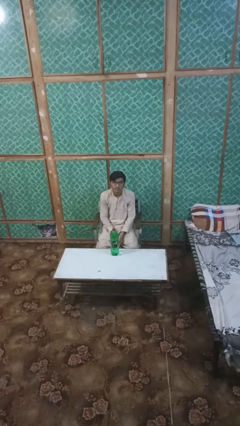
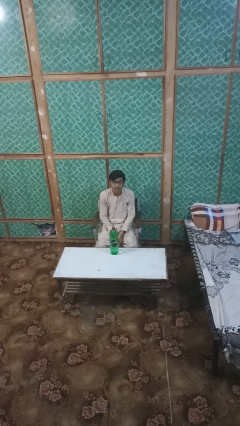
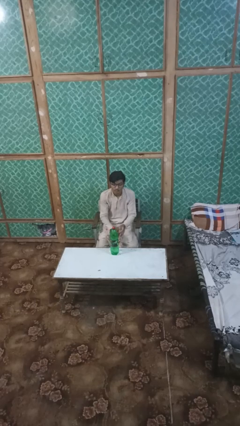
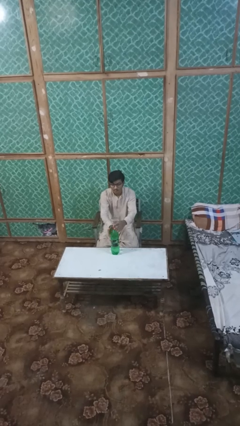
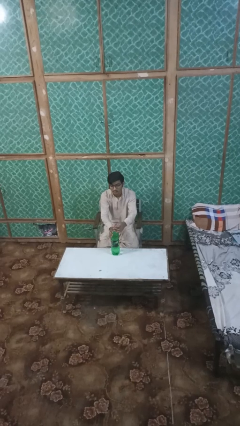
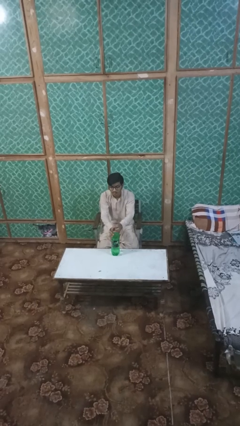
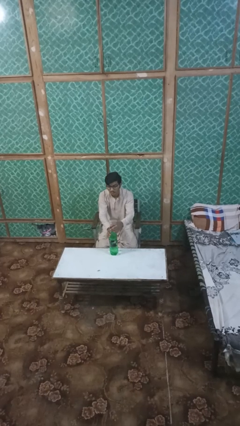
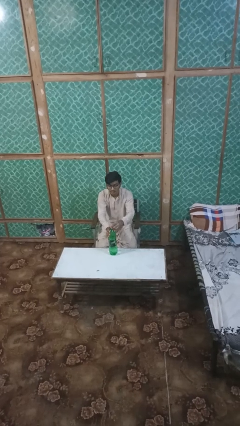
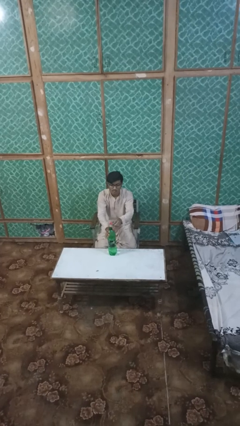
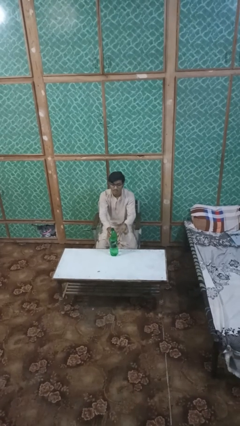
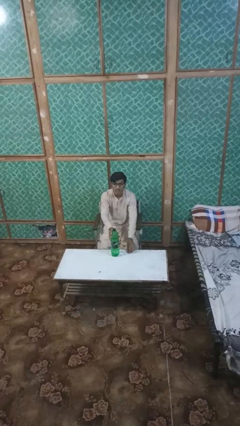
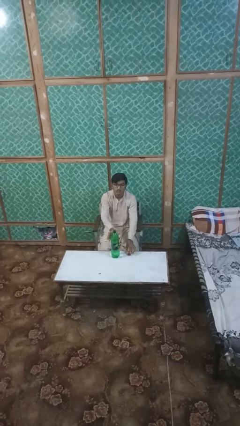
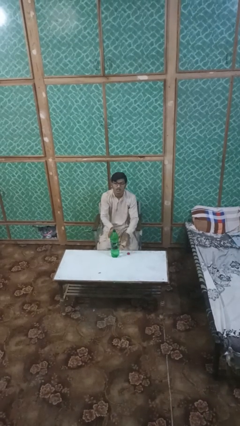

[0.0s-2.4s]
person unscrews lid from bottle

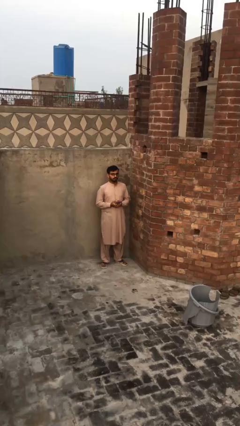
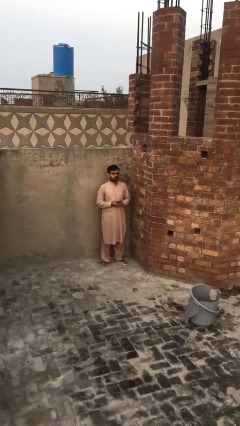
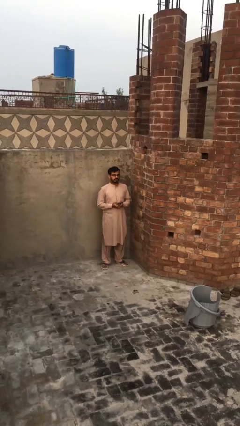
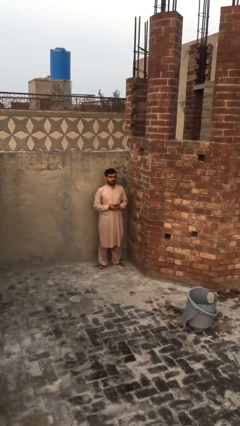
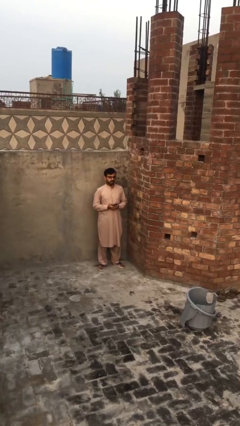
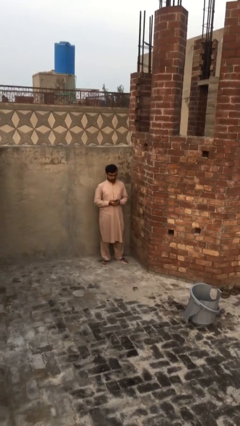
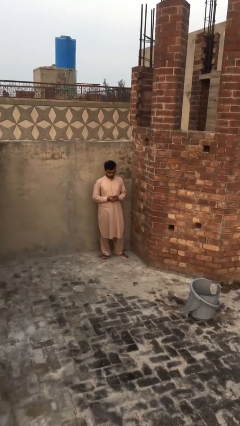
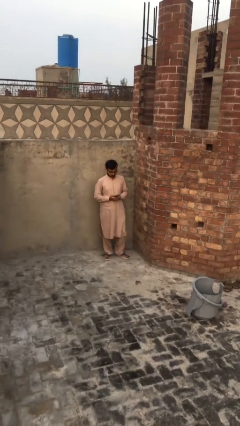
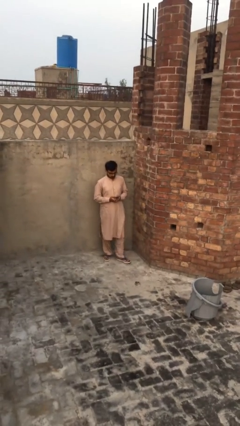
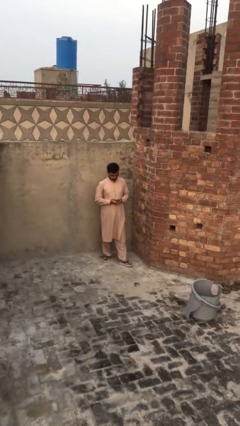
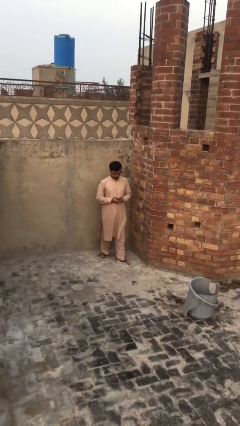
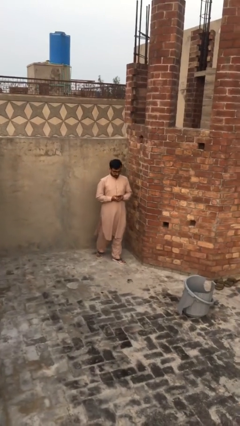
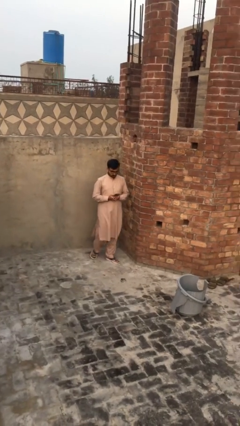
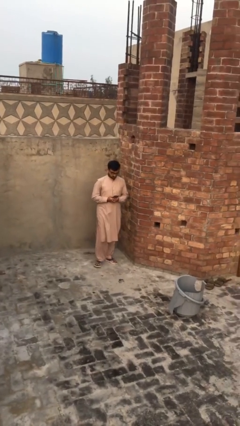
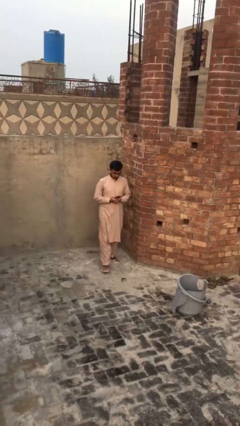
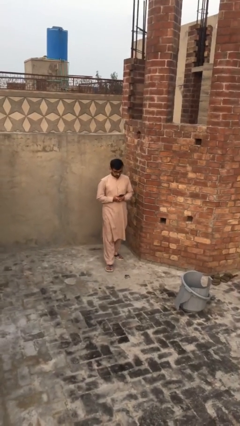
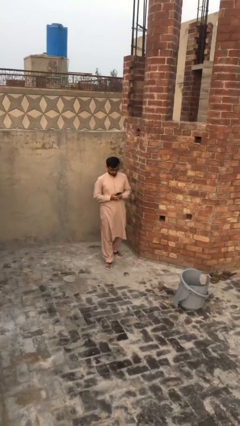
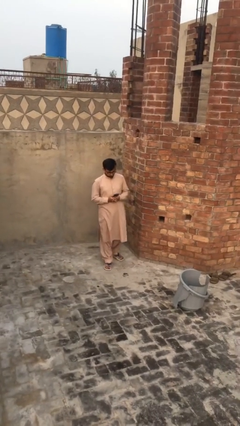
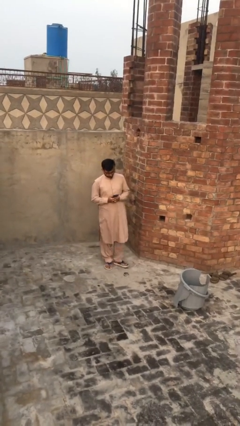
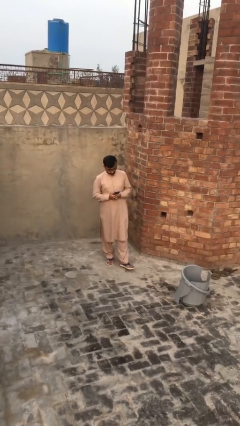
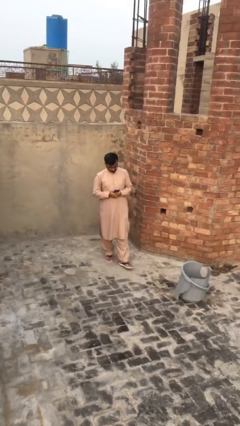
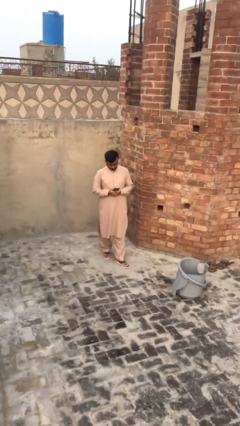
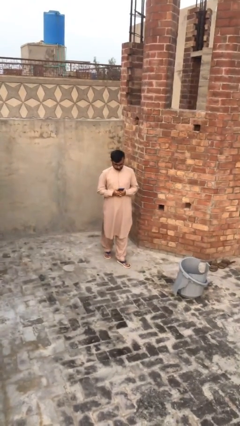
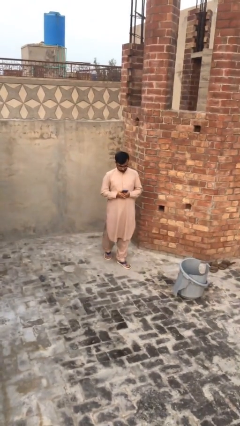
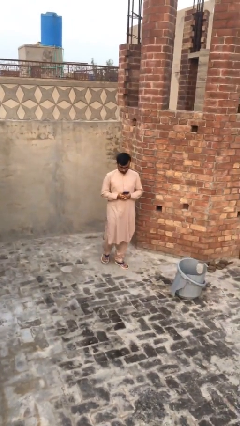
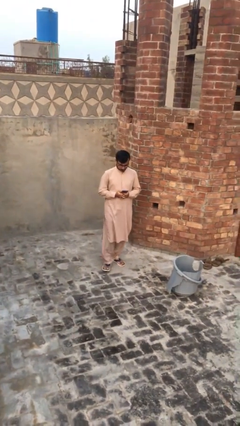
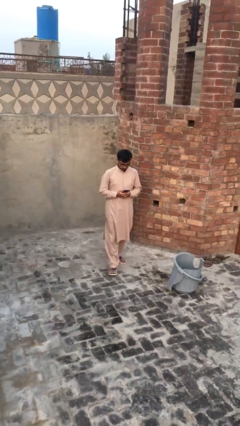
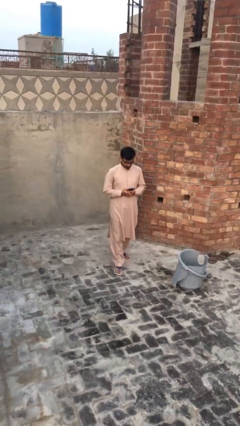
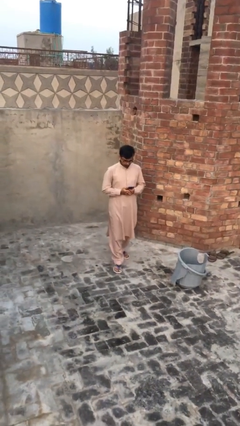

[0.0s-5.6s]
person texts on phone

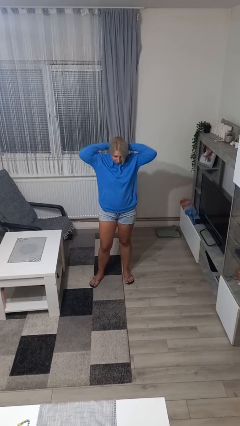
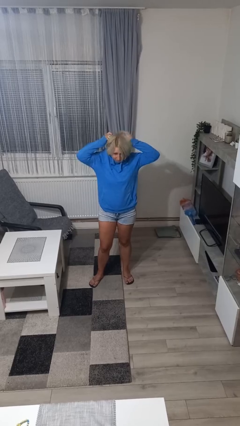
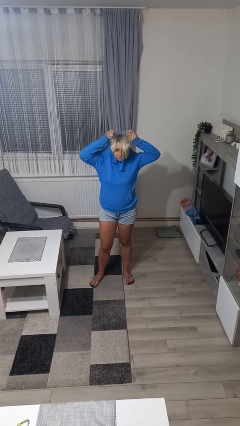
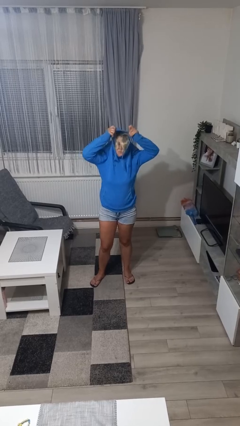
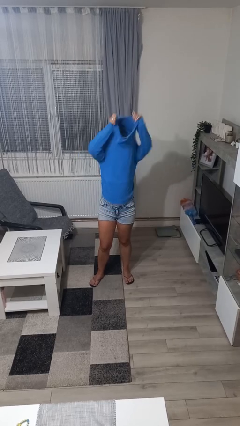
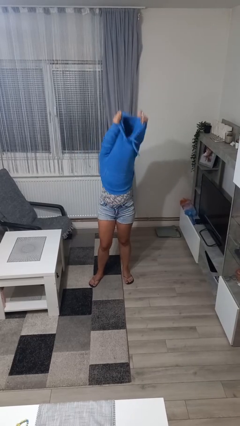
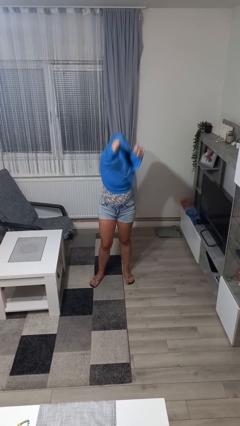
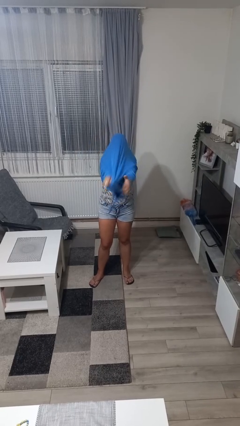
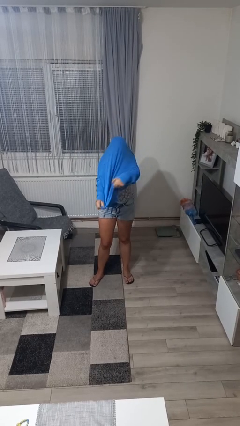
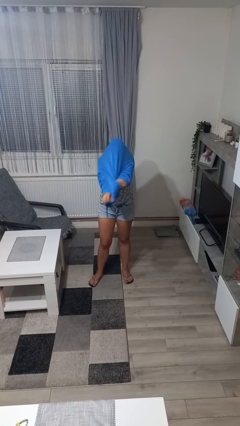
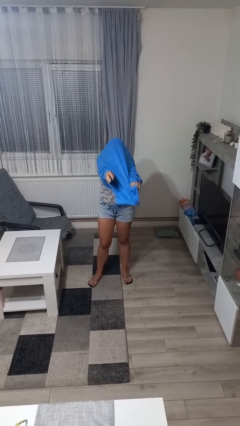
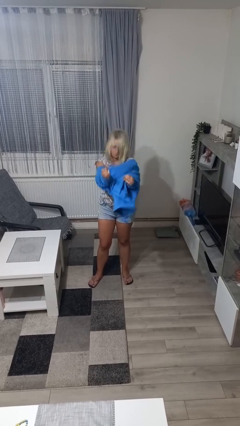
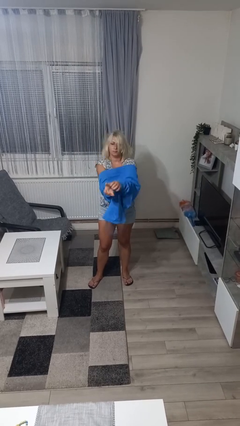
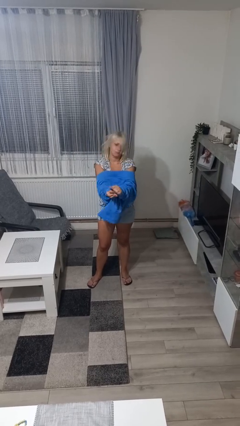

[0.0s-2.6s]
person takes off hoodie

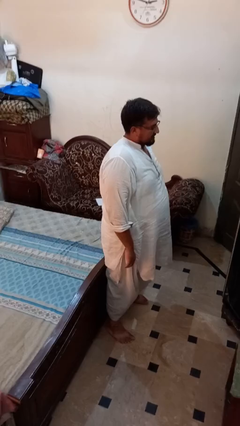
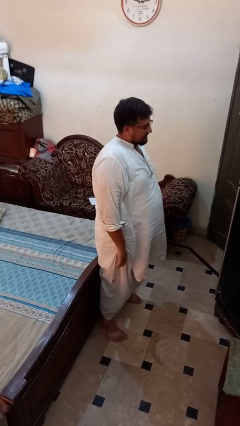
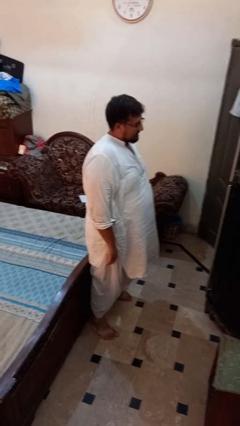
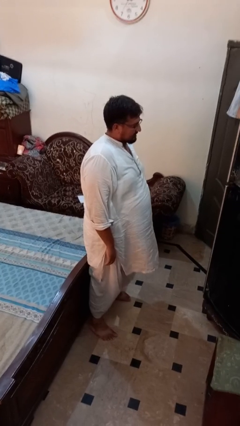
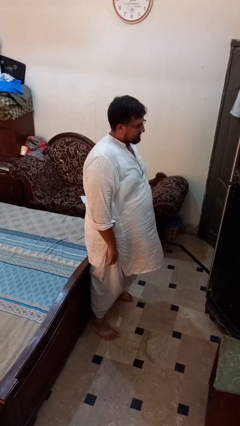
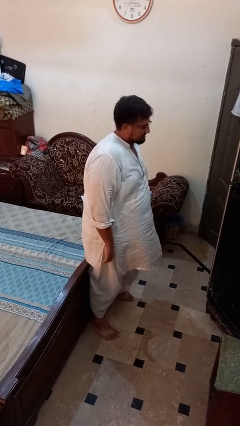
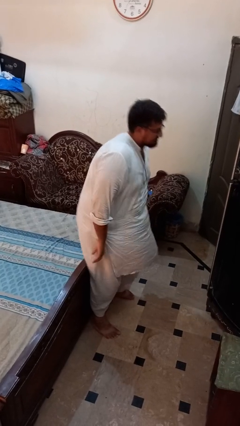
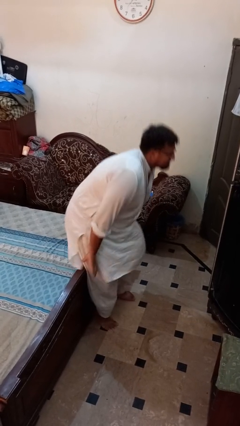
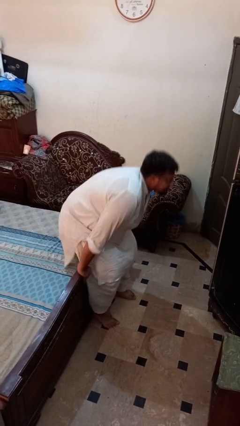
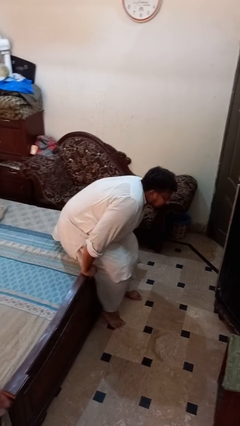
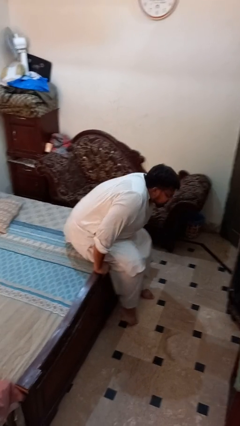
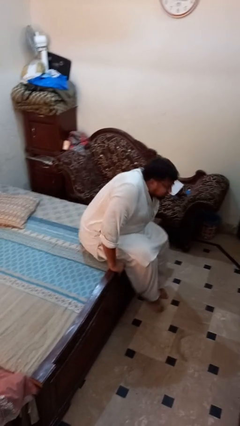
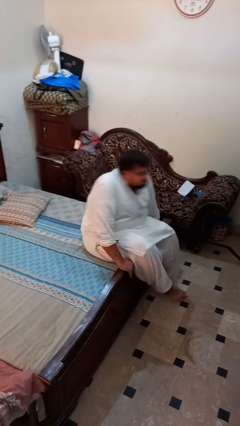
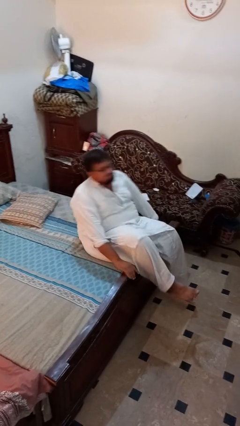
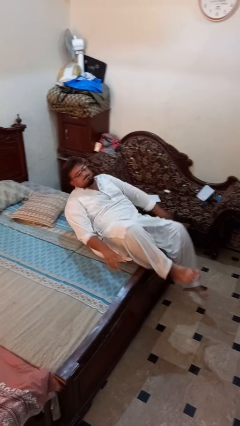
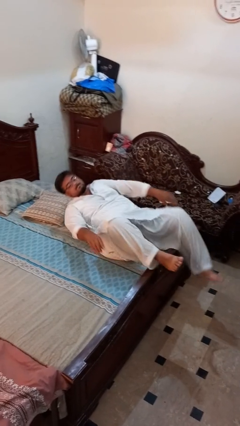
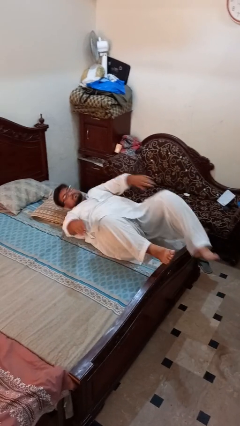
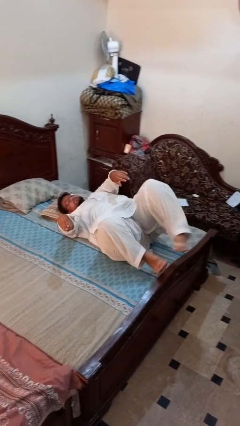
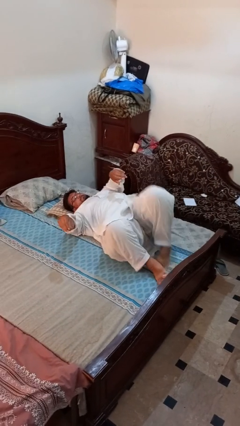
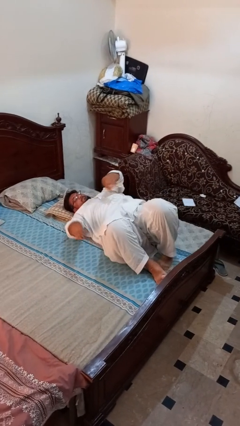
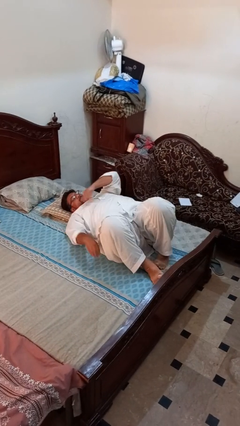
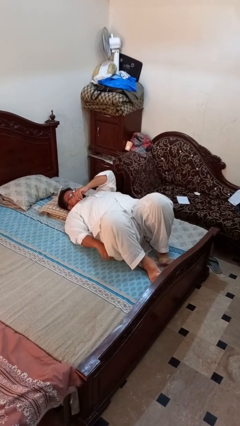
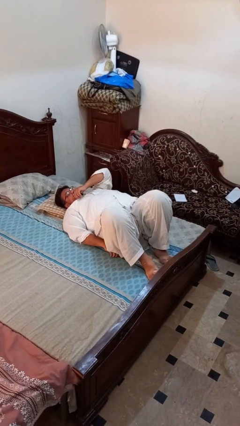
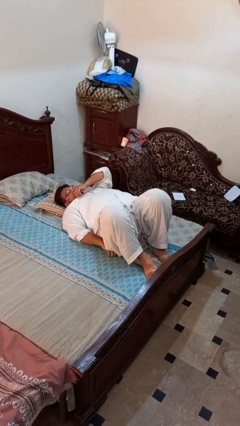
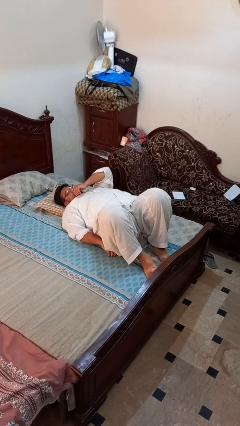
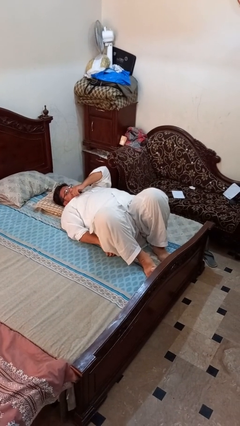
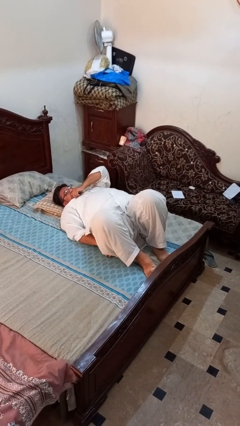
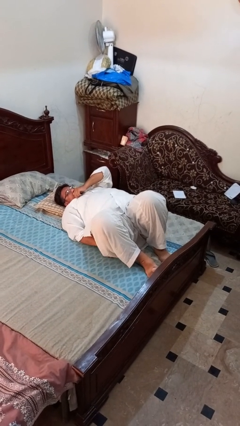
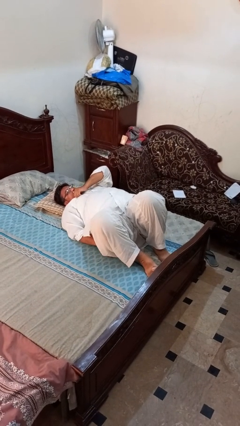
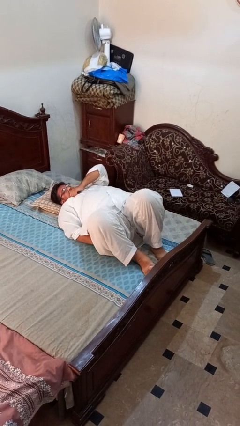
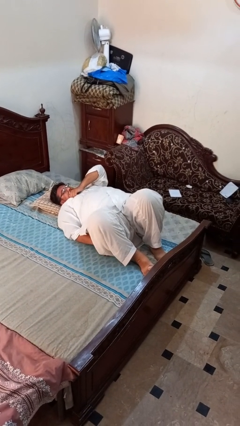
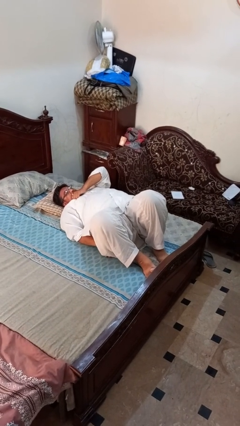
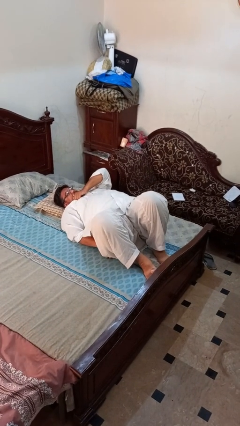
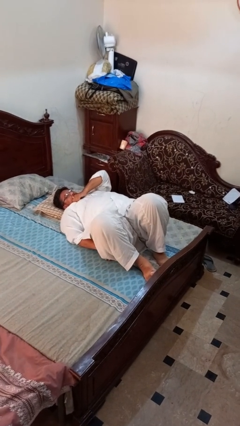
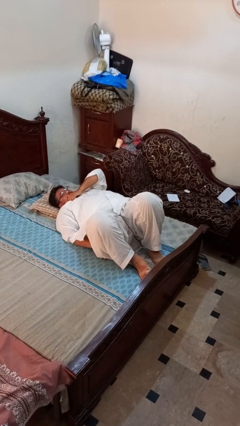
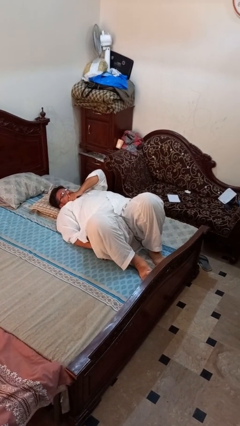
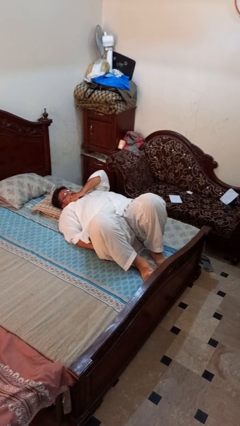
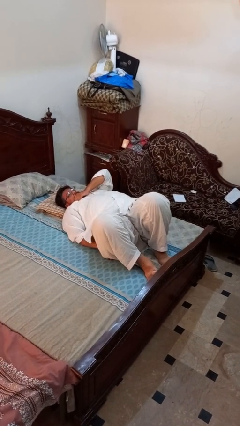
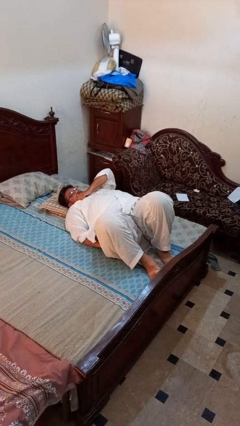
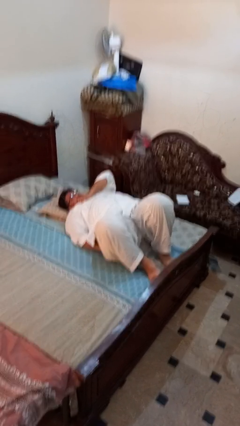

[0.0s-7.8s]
person lies down on bed
